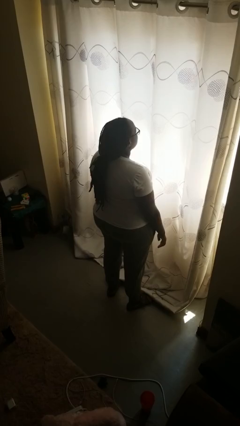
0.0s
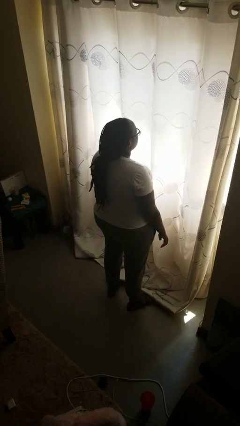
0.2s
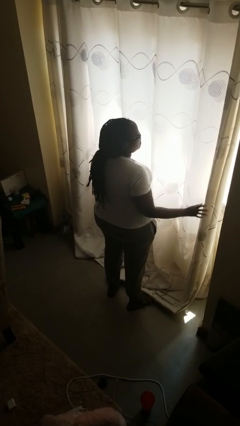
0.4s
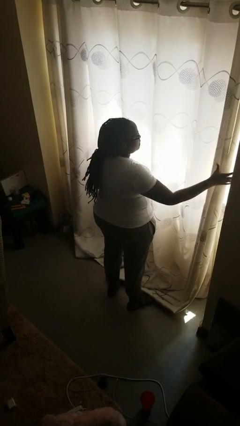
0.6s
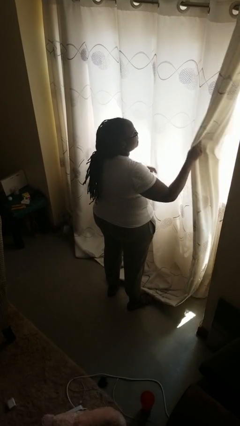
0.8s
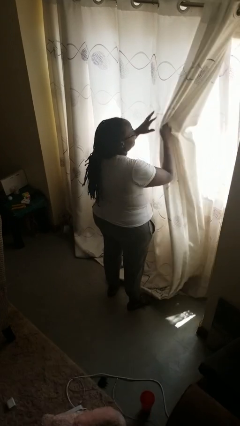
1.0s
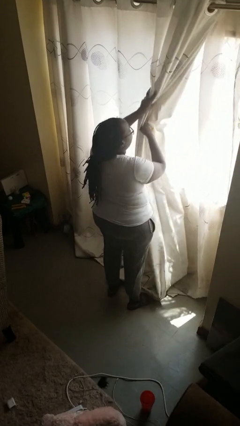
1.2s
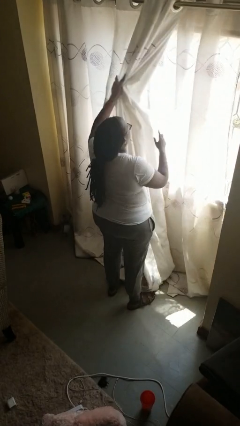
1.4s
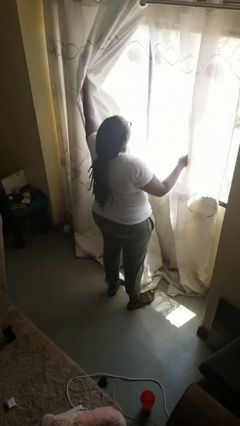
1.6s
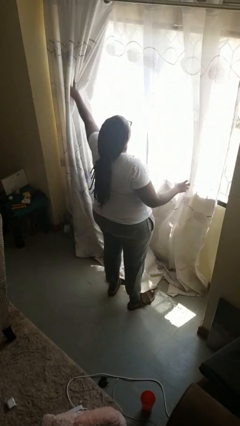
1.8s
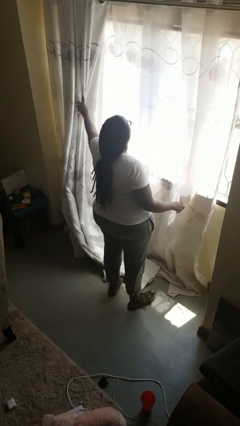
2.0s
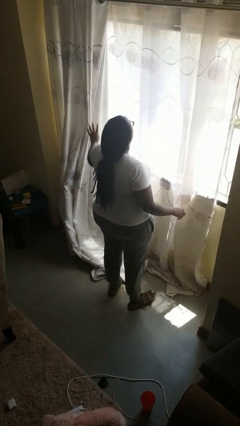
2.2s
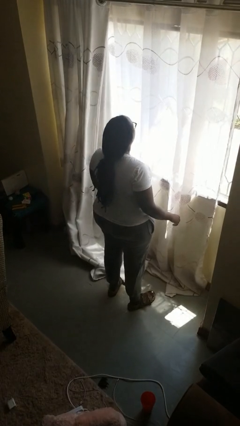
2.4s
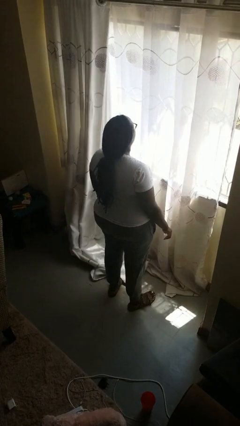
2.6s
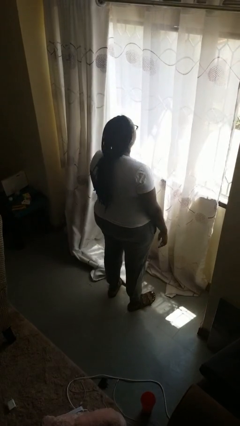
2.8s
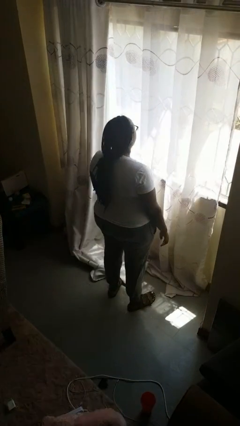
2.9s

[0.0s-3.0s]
person opens curtains

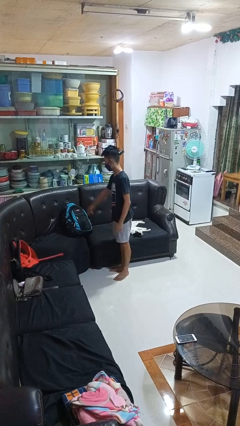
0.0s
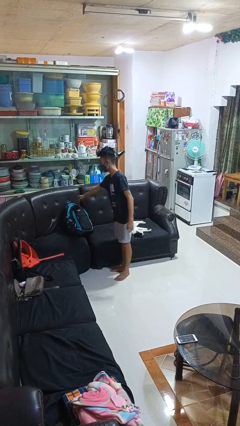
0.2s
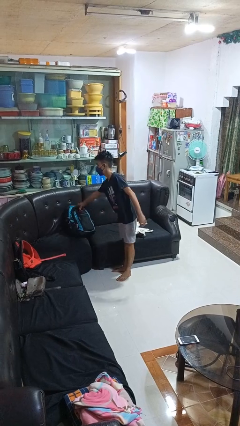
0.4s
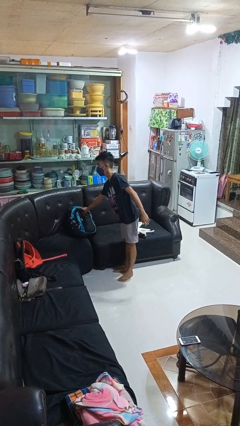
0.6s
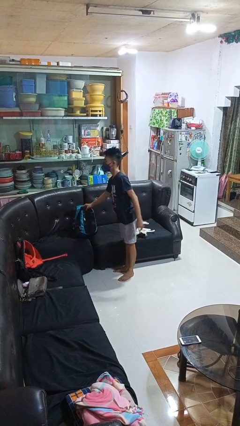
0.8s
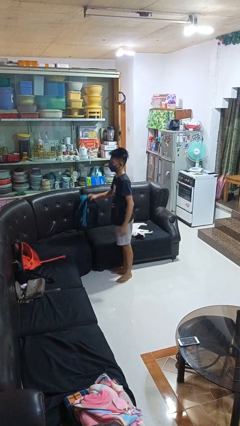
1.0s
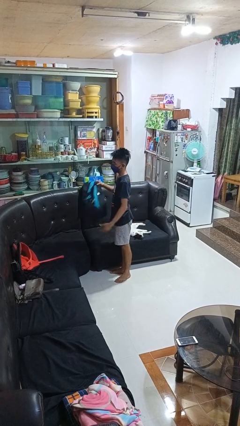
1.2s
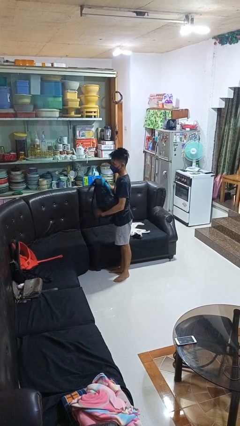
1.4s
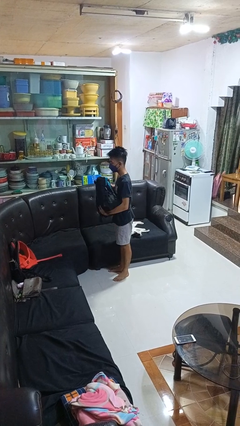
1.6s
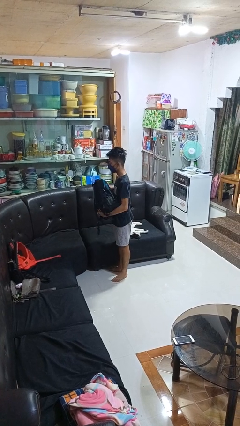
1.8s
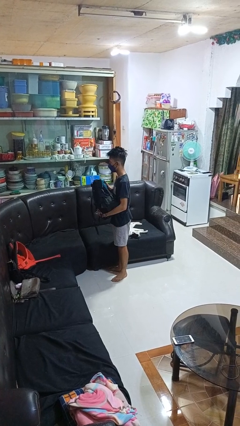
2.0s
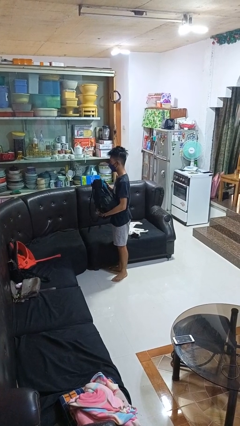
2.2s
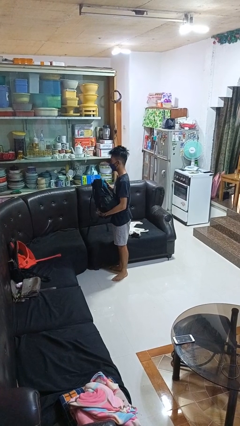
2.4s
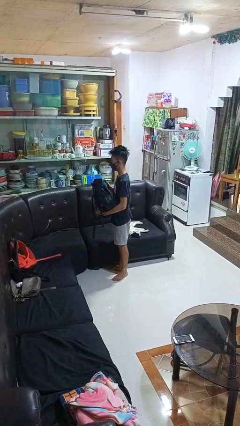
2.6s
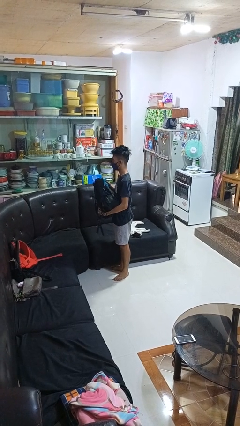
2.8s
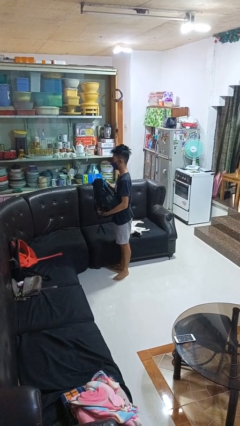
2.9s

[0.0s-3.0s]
person picks up object from couch

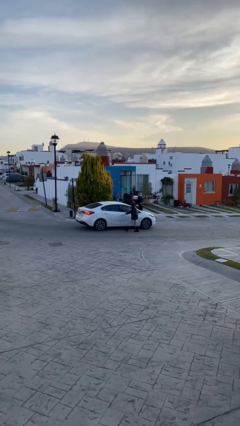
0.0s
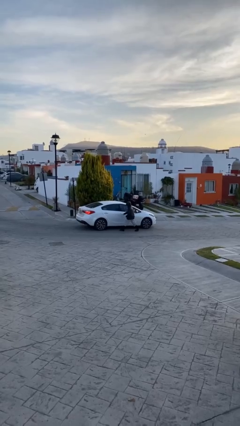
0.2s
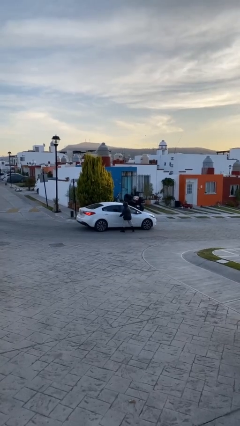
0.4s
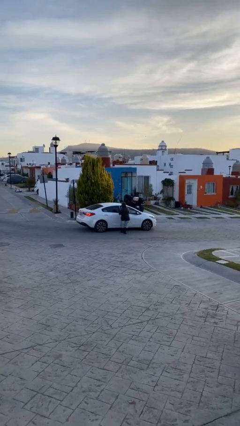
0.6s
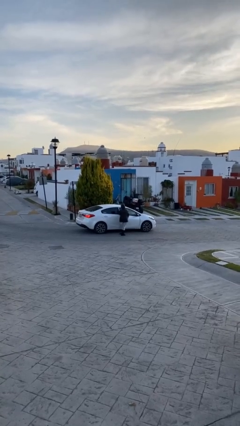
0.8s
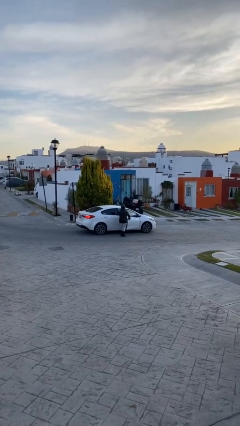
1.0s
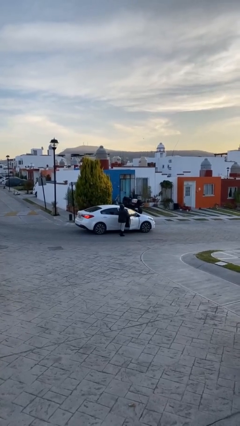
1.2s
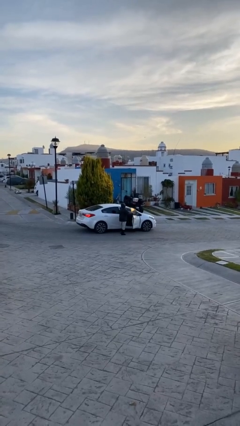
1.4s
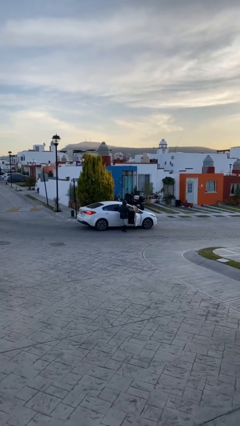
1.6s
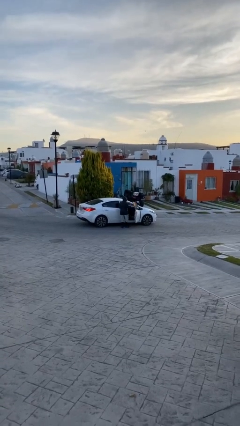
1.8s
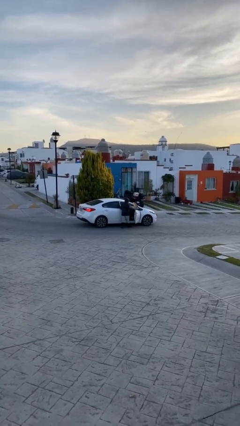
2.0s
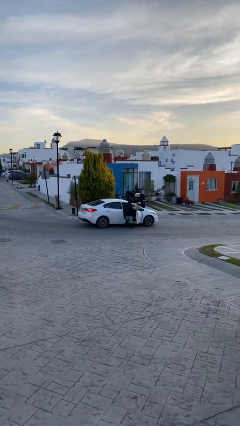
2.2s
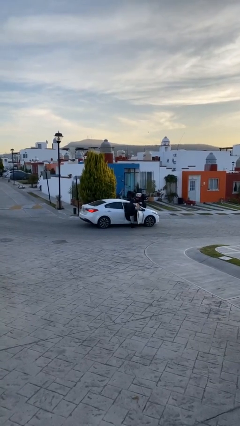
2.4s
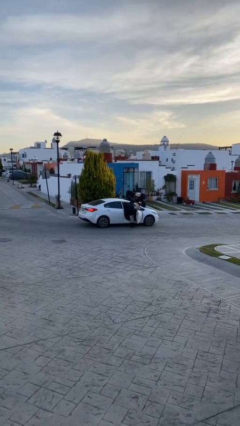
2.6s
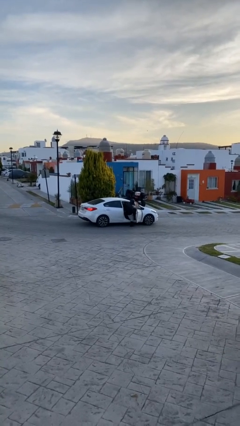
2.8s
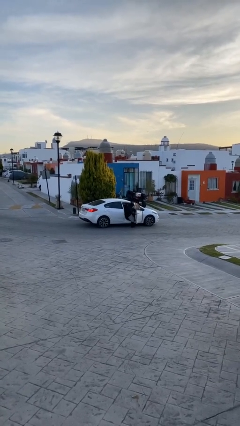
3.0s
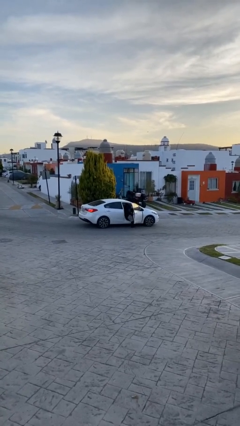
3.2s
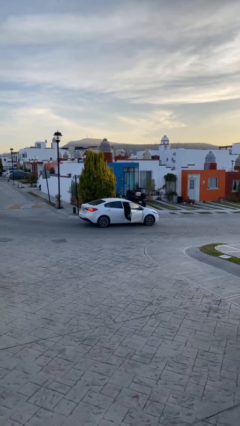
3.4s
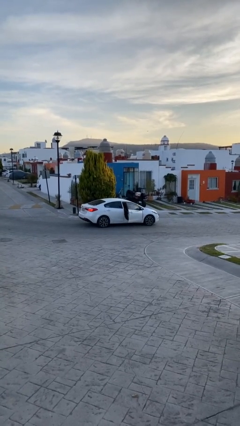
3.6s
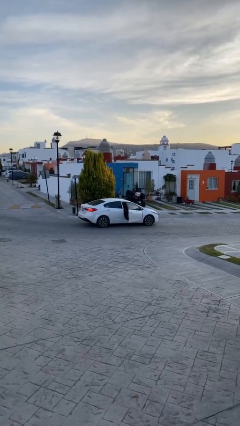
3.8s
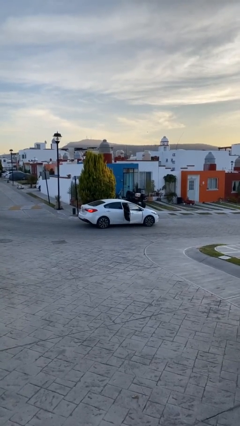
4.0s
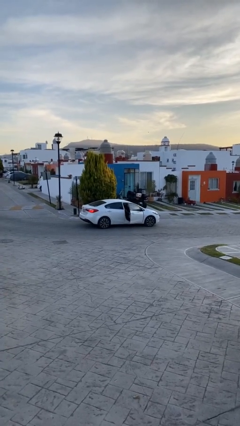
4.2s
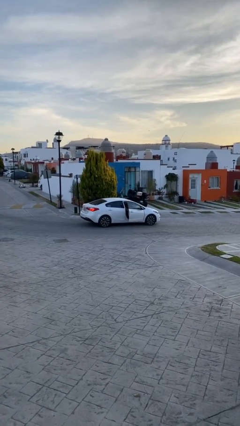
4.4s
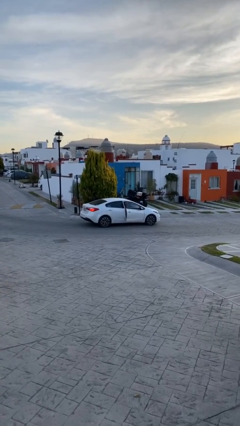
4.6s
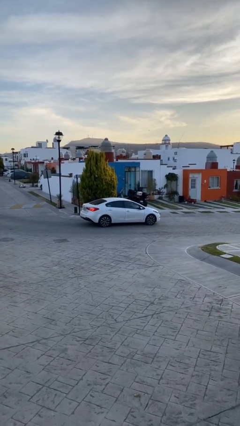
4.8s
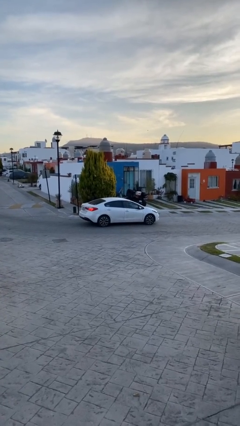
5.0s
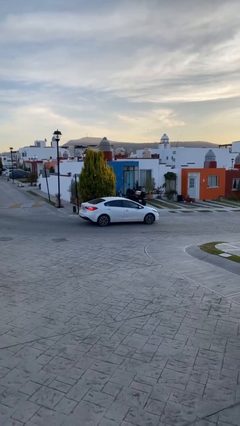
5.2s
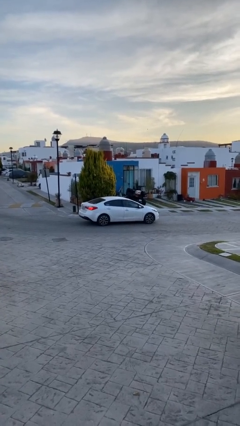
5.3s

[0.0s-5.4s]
car picks up person

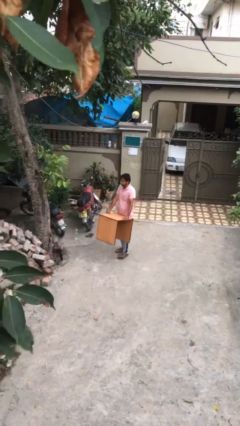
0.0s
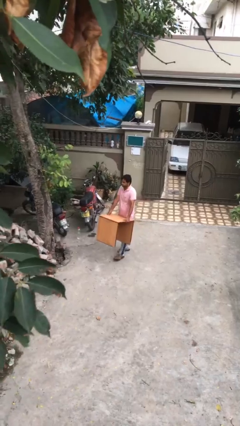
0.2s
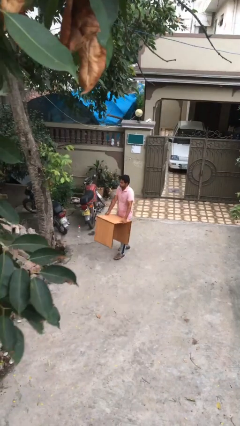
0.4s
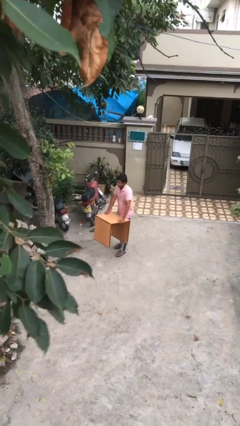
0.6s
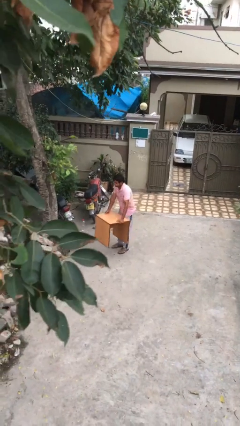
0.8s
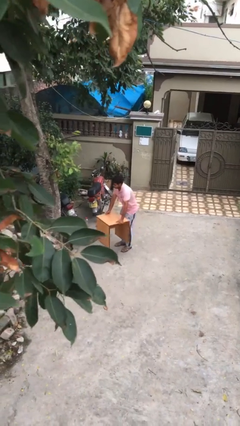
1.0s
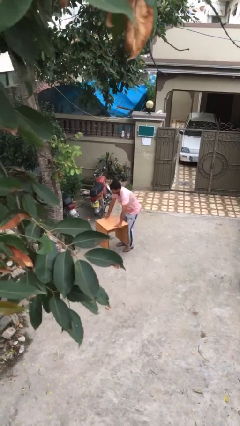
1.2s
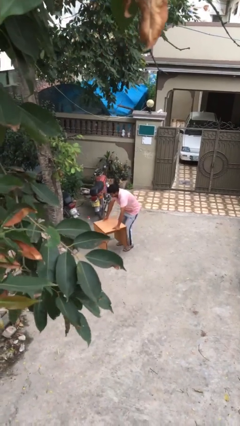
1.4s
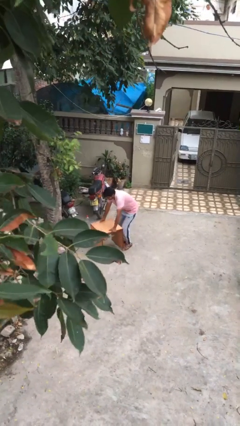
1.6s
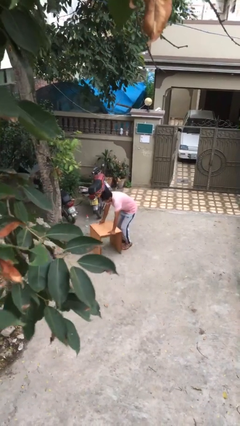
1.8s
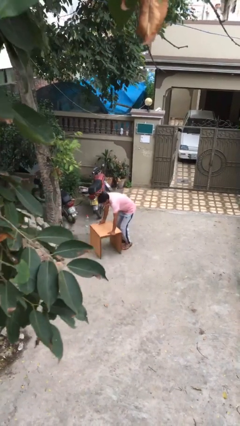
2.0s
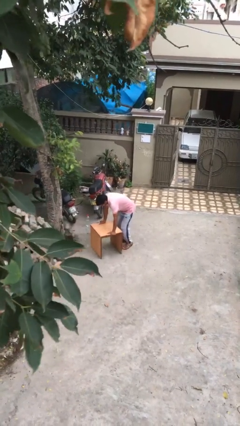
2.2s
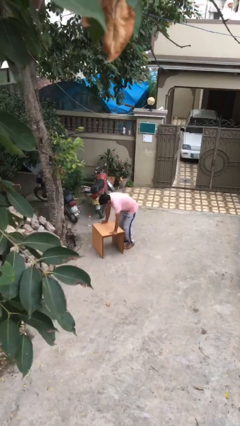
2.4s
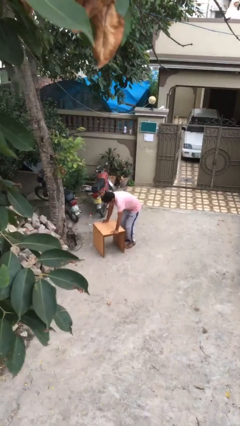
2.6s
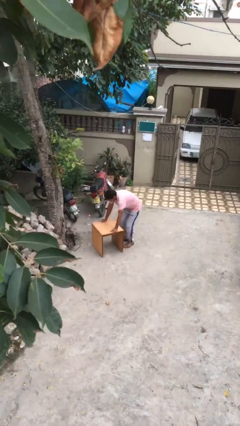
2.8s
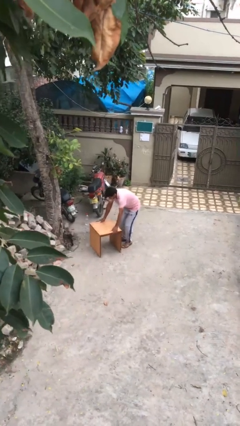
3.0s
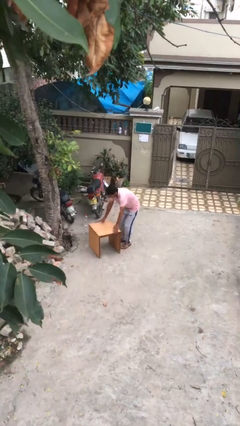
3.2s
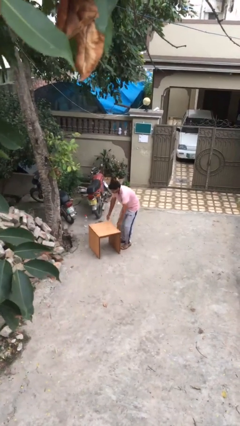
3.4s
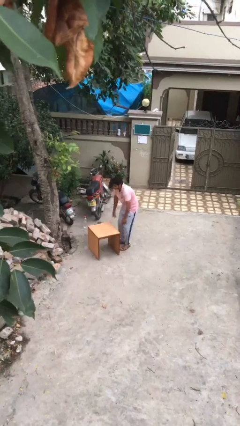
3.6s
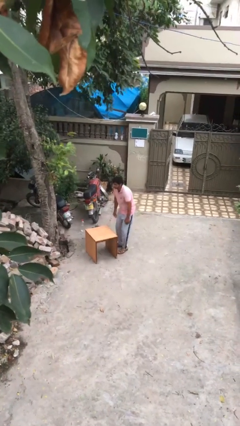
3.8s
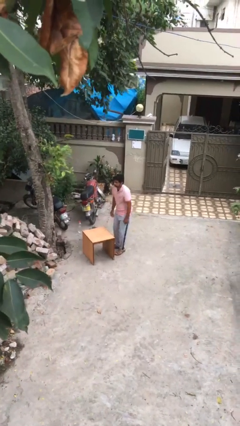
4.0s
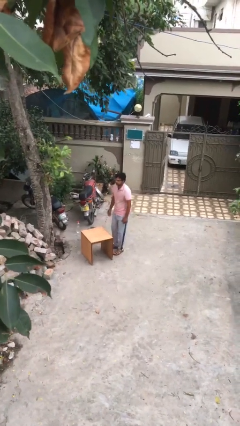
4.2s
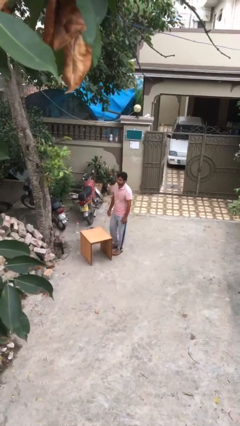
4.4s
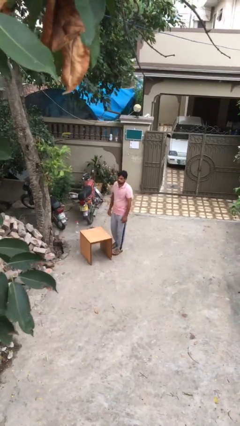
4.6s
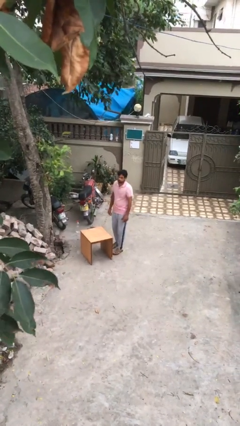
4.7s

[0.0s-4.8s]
person puts down object on floor

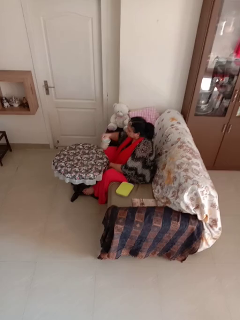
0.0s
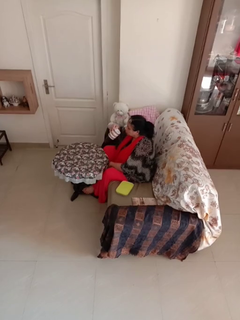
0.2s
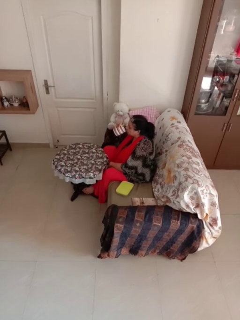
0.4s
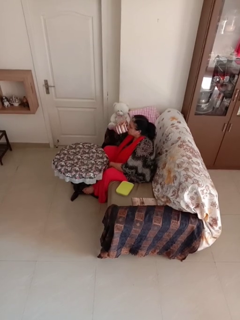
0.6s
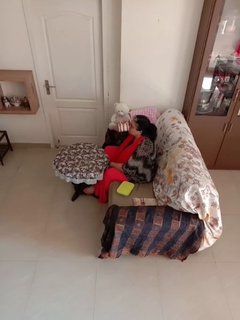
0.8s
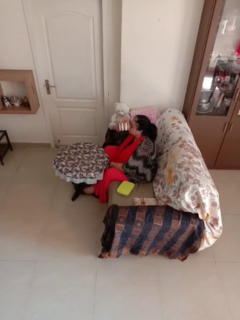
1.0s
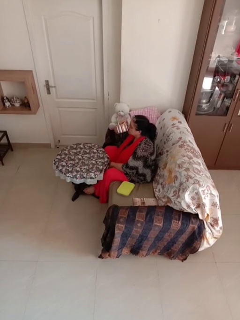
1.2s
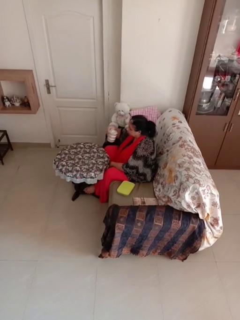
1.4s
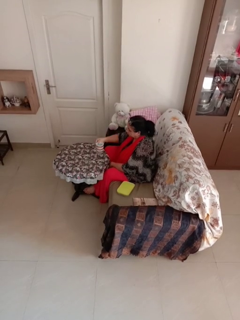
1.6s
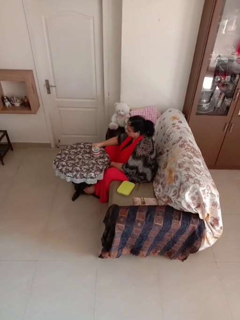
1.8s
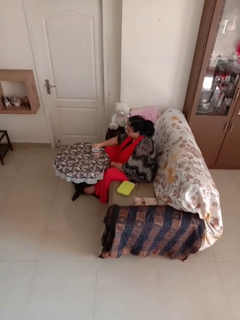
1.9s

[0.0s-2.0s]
person drinks from mug
